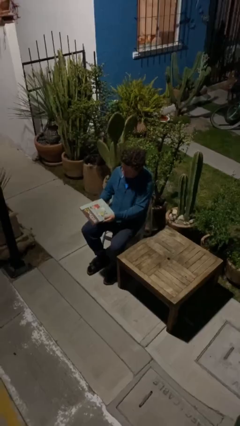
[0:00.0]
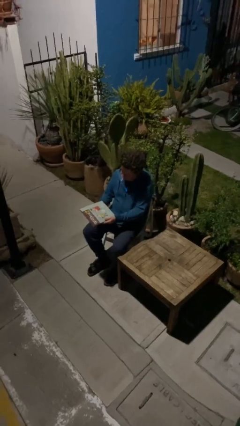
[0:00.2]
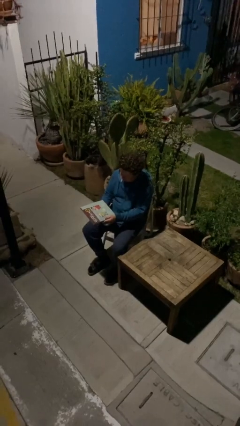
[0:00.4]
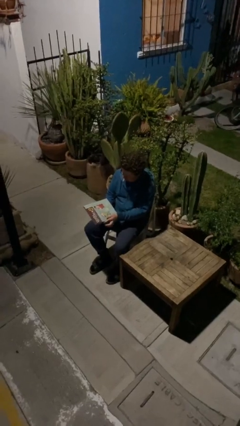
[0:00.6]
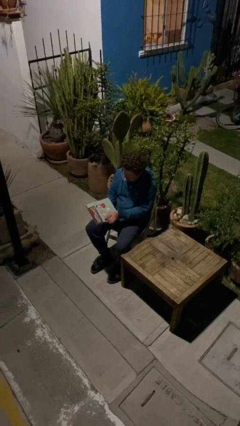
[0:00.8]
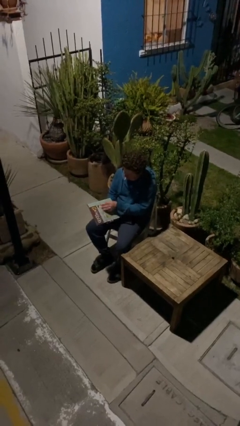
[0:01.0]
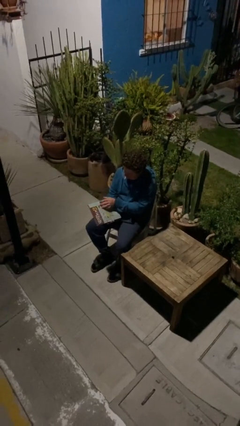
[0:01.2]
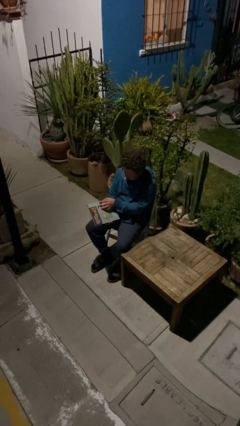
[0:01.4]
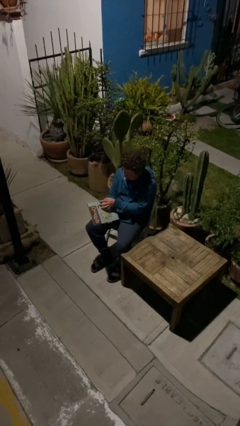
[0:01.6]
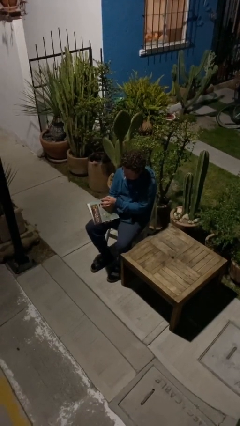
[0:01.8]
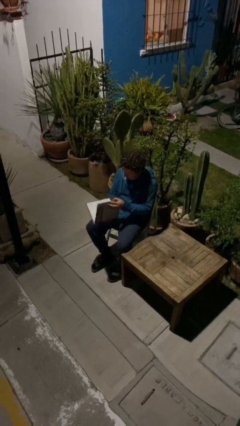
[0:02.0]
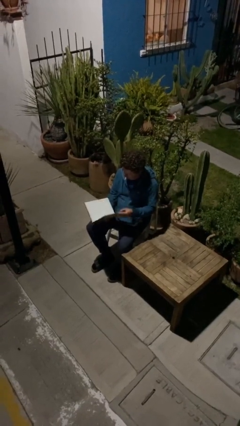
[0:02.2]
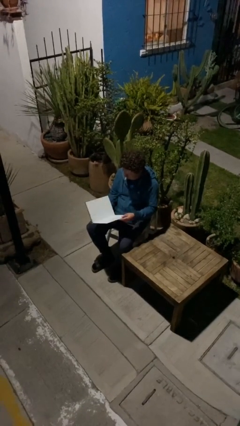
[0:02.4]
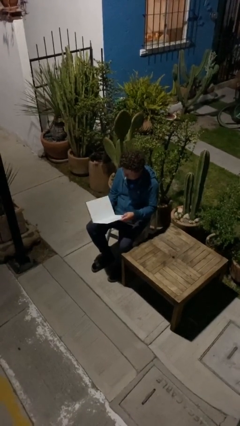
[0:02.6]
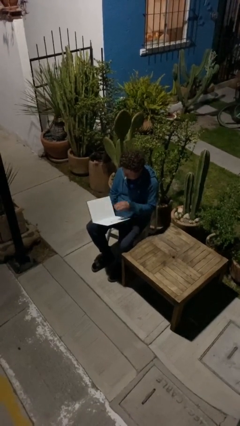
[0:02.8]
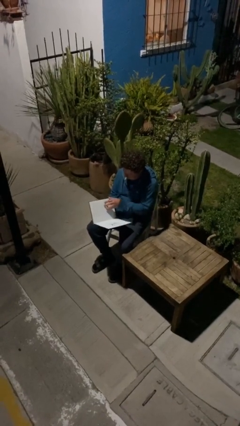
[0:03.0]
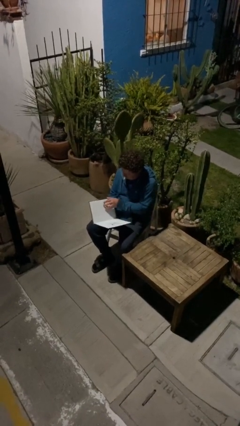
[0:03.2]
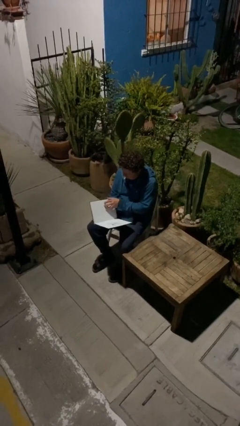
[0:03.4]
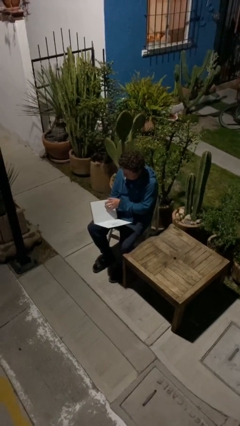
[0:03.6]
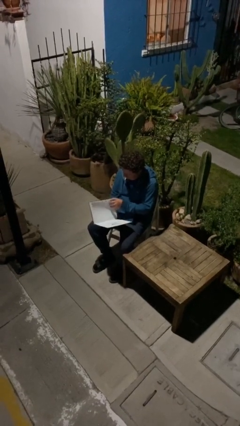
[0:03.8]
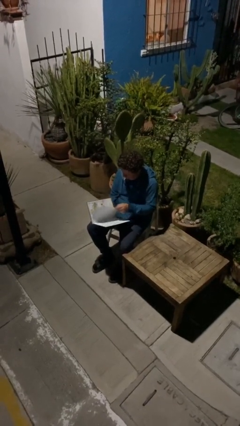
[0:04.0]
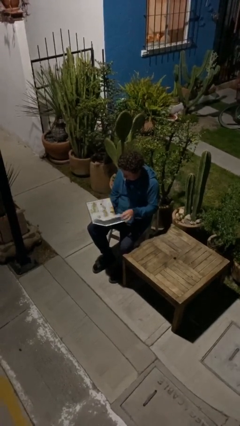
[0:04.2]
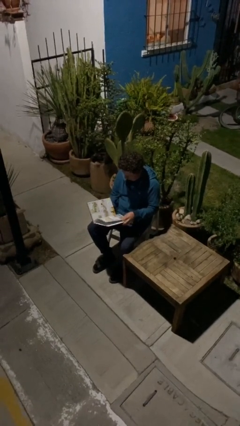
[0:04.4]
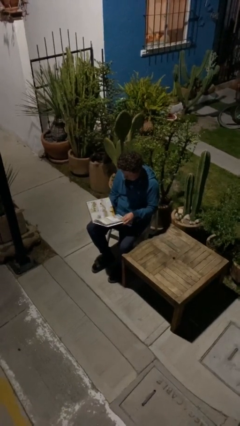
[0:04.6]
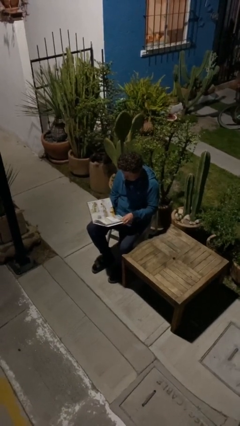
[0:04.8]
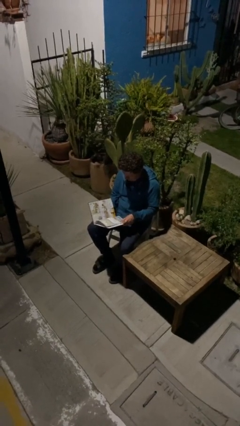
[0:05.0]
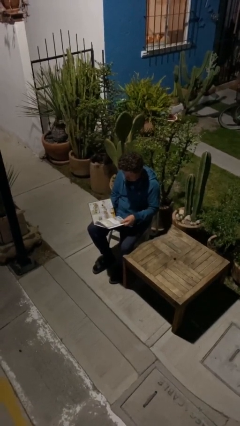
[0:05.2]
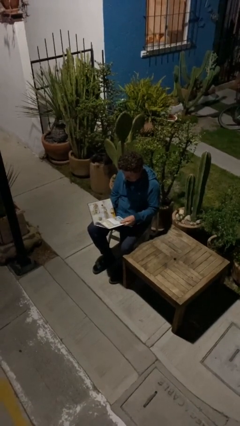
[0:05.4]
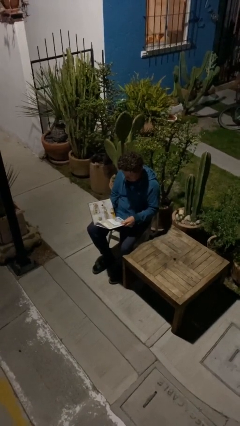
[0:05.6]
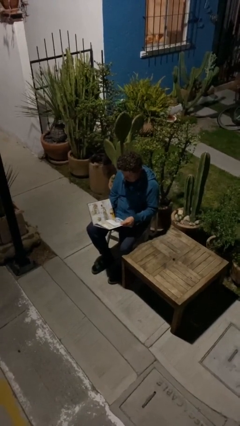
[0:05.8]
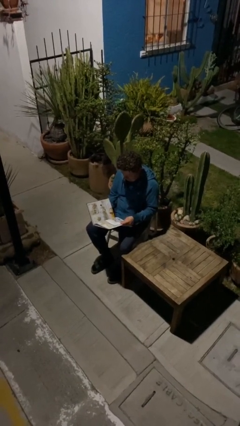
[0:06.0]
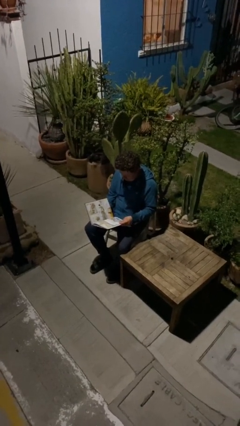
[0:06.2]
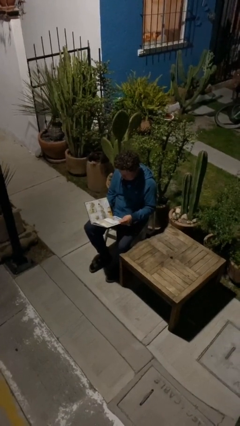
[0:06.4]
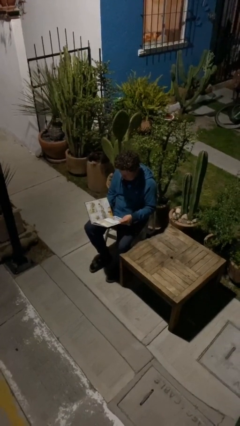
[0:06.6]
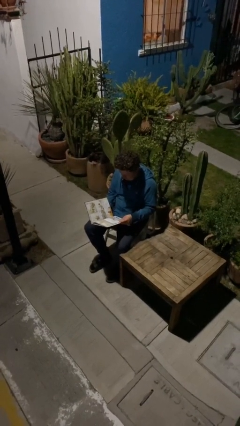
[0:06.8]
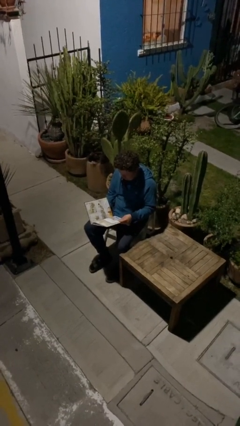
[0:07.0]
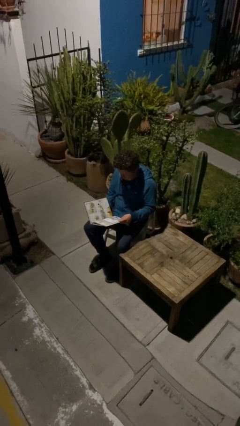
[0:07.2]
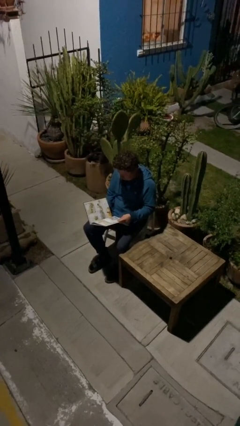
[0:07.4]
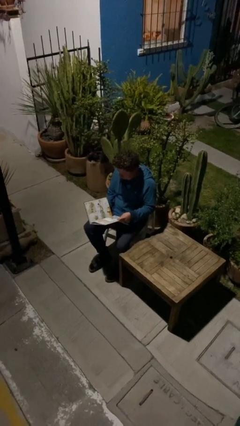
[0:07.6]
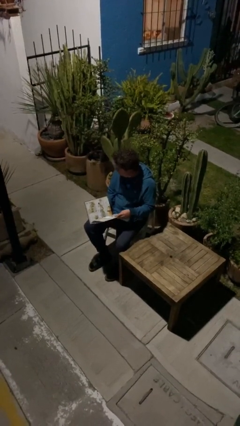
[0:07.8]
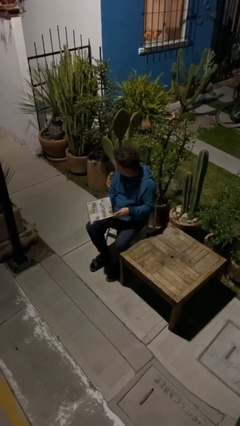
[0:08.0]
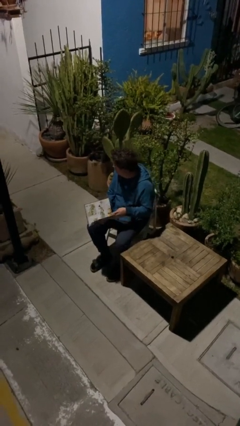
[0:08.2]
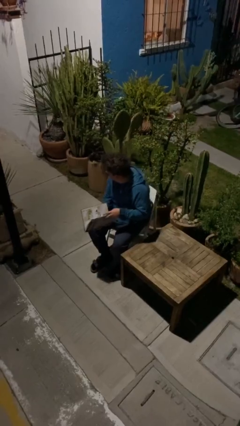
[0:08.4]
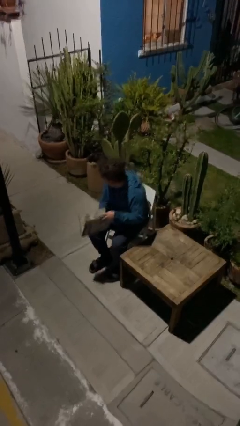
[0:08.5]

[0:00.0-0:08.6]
person reads document

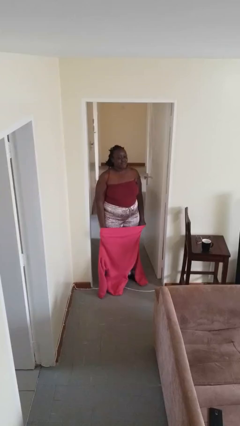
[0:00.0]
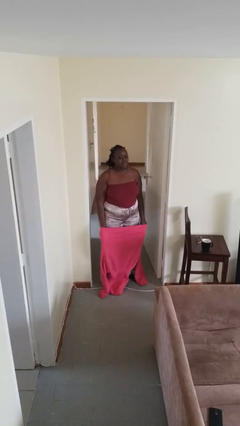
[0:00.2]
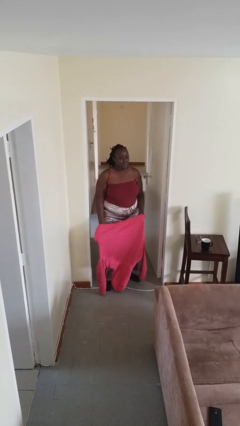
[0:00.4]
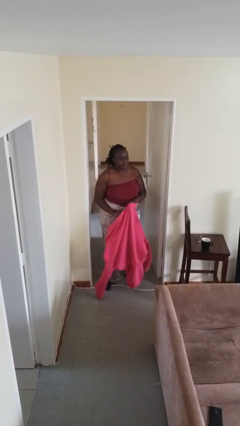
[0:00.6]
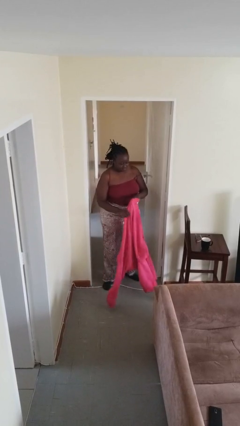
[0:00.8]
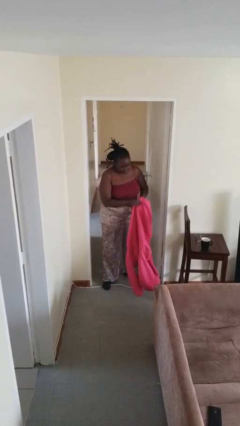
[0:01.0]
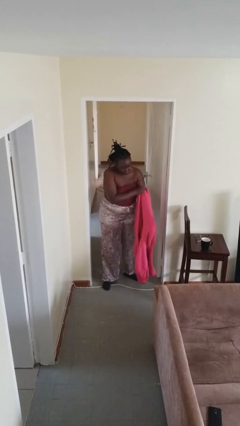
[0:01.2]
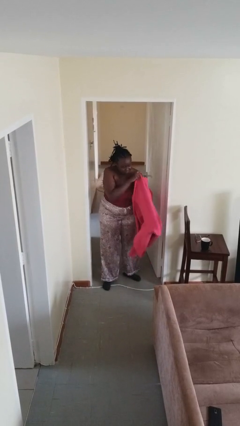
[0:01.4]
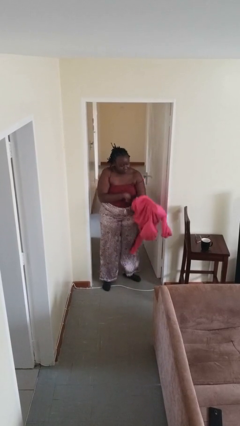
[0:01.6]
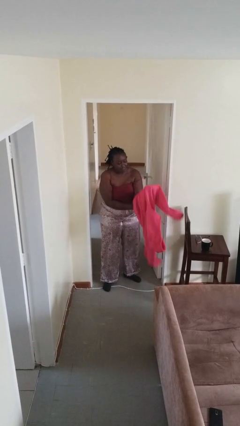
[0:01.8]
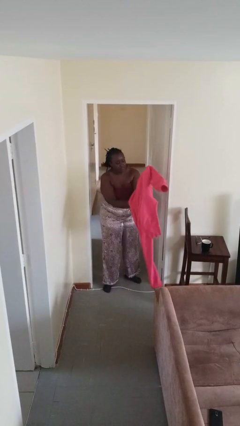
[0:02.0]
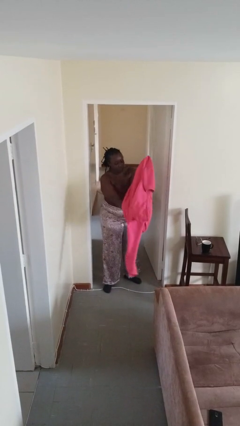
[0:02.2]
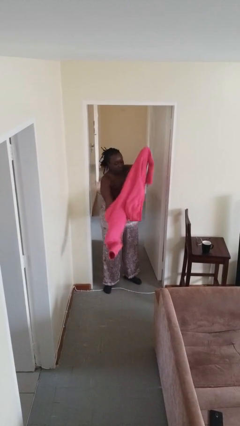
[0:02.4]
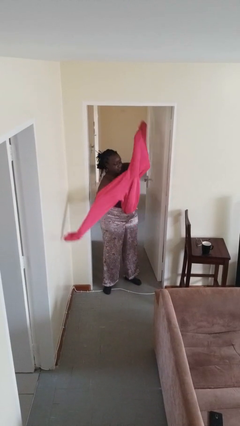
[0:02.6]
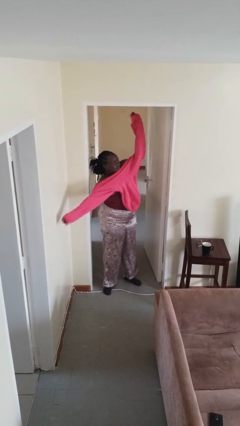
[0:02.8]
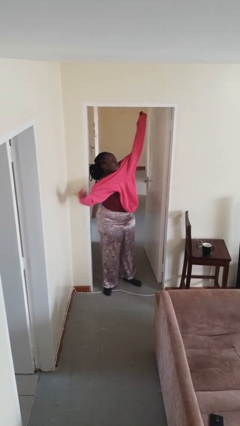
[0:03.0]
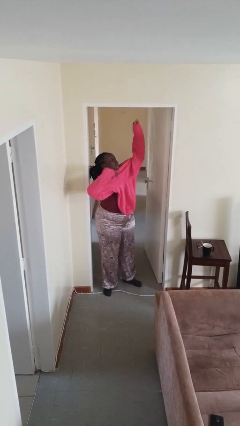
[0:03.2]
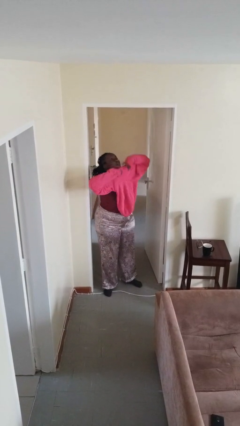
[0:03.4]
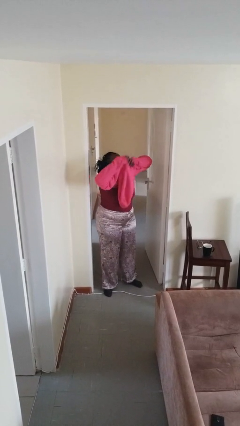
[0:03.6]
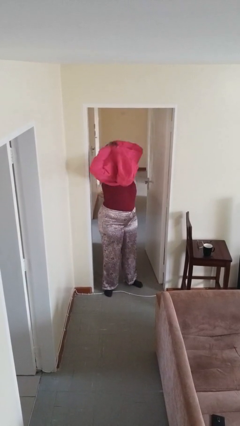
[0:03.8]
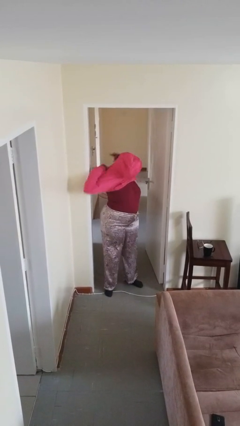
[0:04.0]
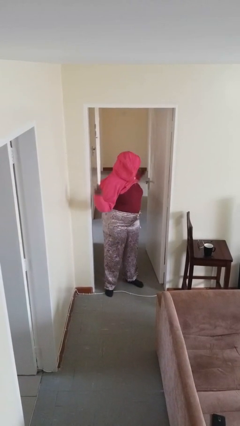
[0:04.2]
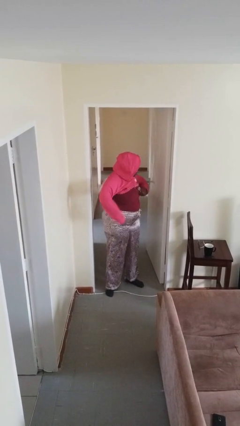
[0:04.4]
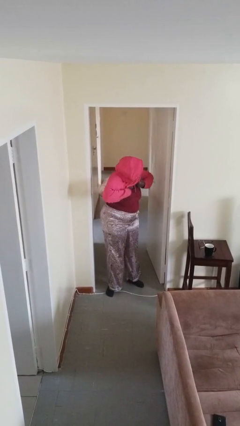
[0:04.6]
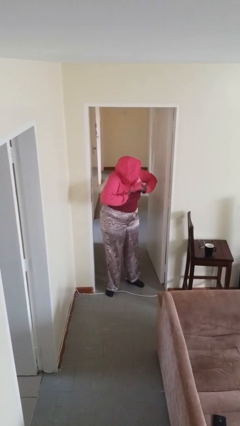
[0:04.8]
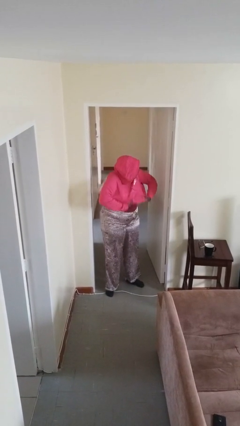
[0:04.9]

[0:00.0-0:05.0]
person puts on hoodie

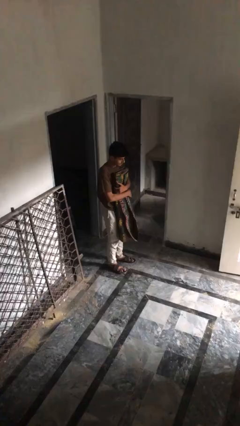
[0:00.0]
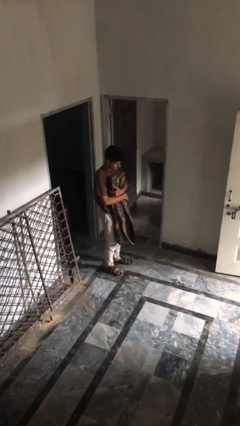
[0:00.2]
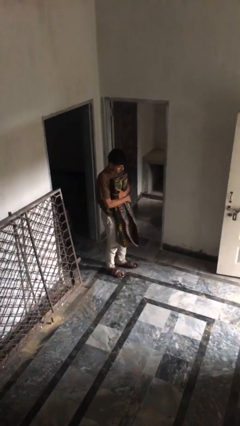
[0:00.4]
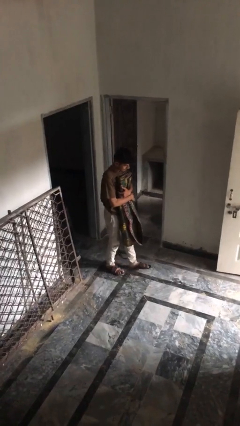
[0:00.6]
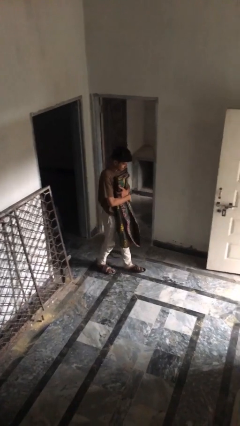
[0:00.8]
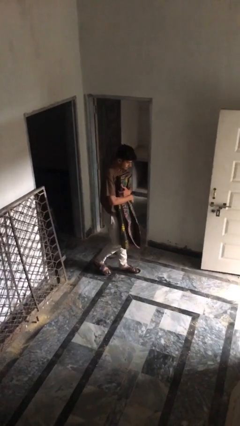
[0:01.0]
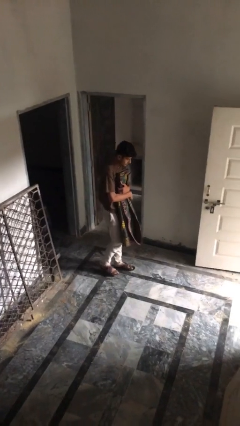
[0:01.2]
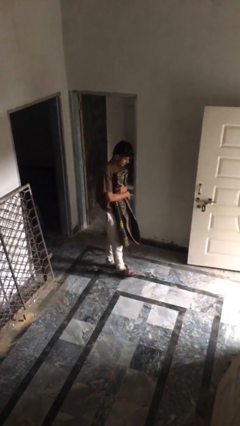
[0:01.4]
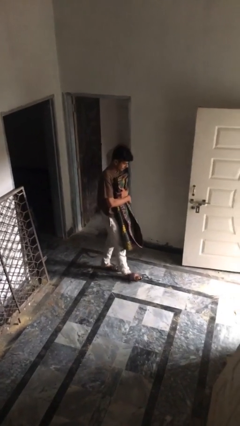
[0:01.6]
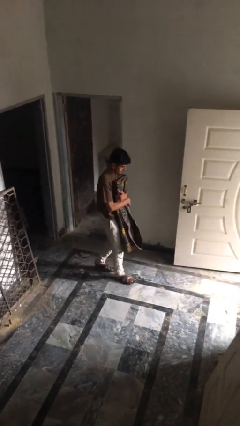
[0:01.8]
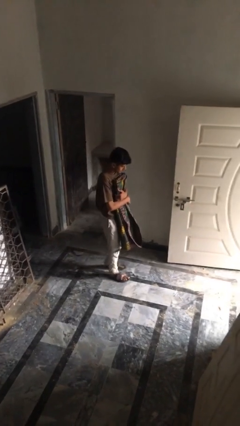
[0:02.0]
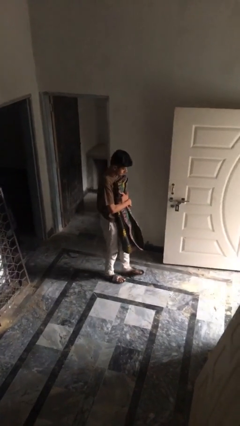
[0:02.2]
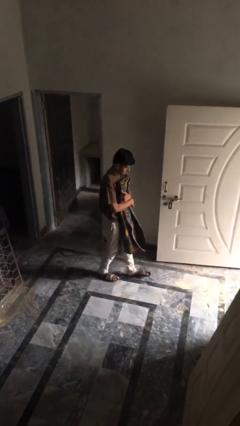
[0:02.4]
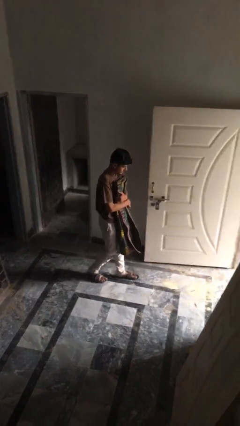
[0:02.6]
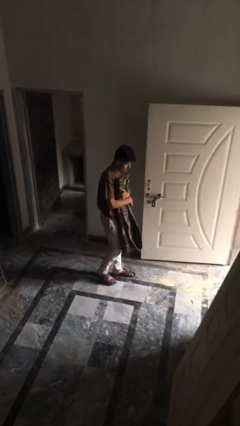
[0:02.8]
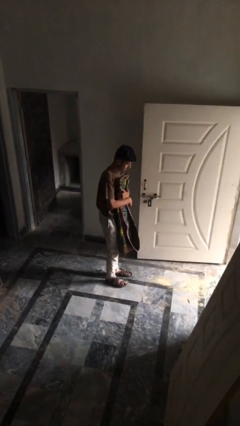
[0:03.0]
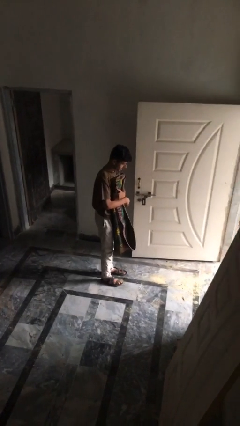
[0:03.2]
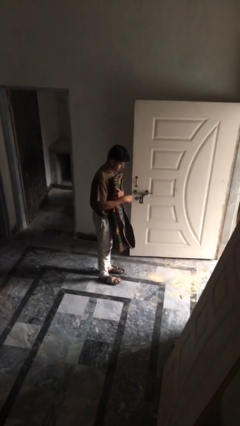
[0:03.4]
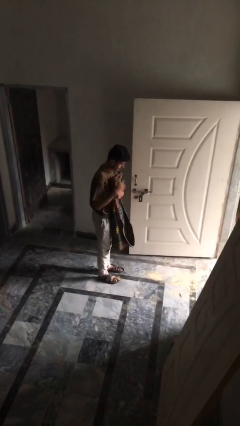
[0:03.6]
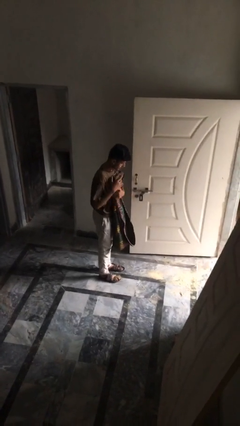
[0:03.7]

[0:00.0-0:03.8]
person carries heavy object

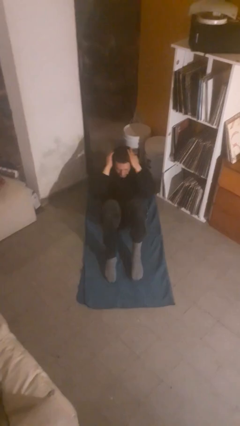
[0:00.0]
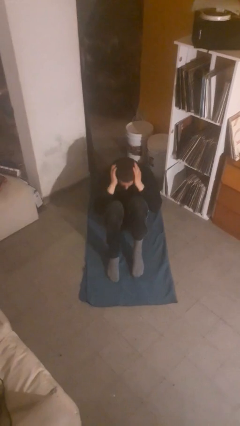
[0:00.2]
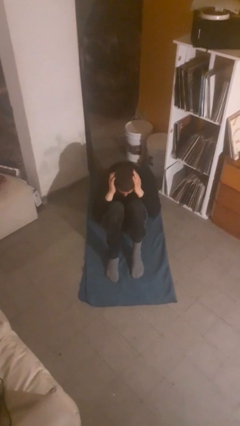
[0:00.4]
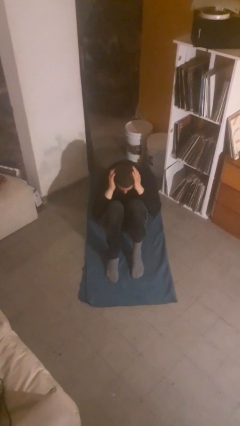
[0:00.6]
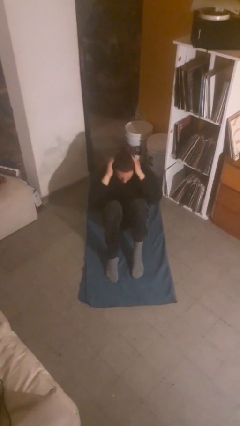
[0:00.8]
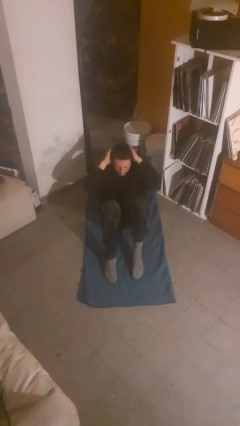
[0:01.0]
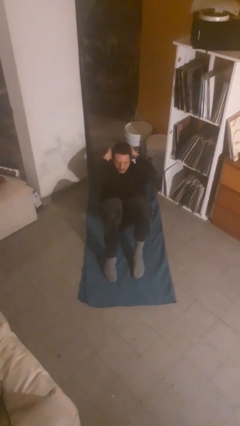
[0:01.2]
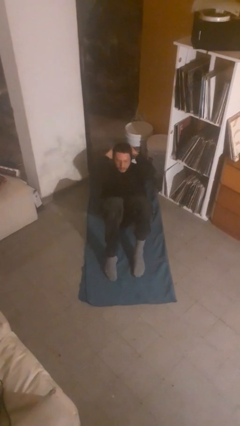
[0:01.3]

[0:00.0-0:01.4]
person exercises with situp
